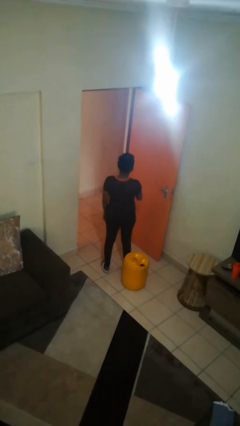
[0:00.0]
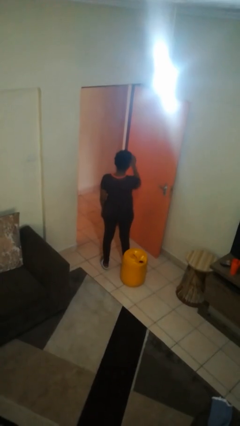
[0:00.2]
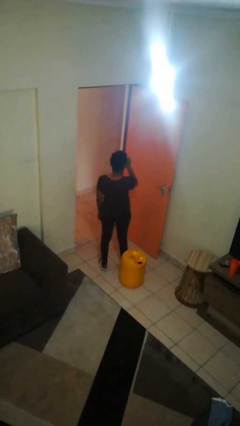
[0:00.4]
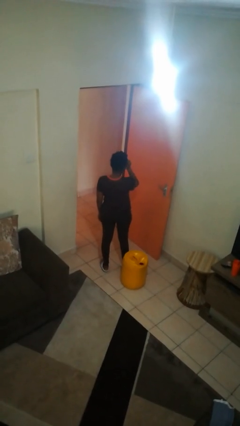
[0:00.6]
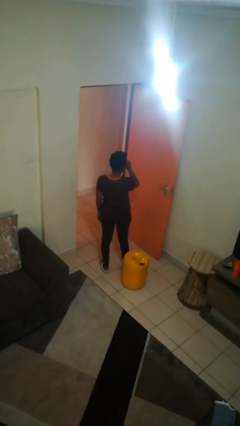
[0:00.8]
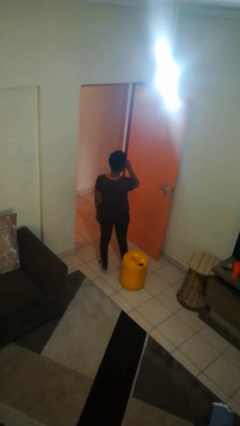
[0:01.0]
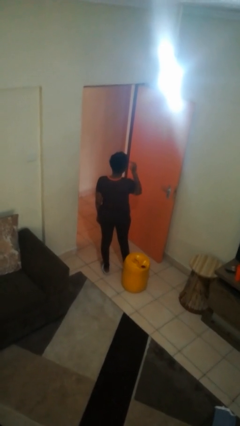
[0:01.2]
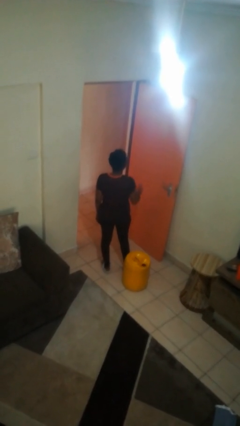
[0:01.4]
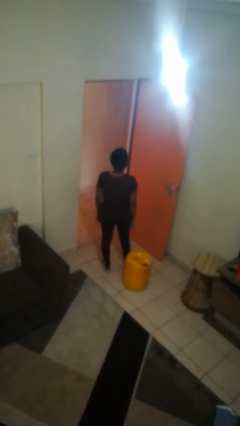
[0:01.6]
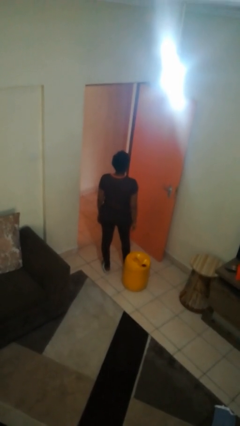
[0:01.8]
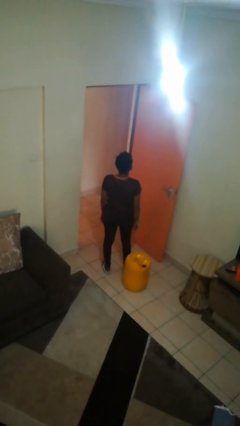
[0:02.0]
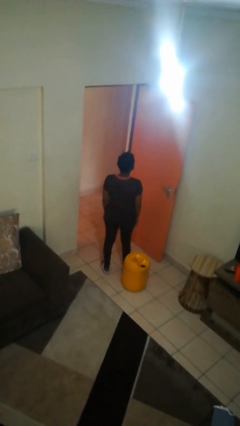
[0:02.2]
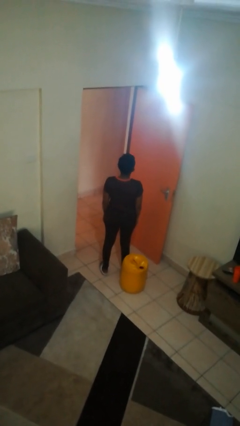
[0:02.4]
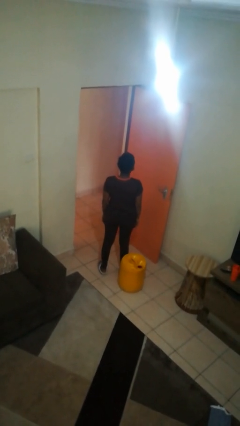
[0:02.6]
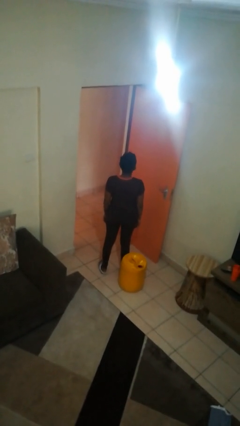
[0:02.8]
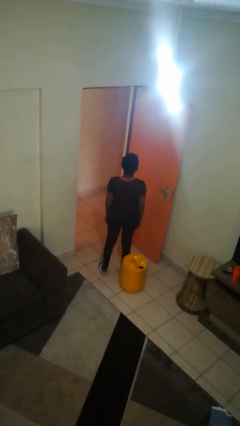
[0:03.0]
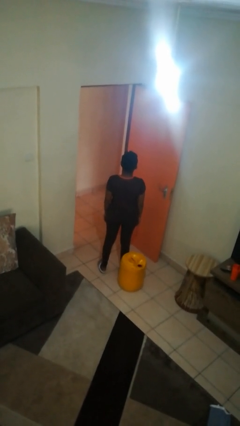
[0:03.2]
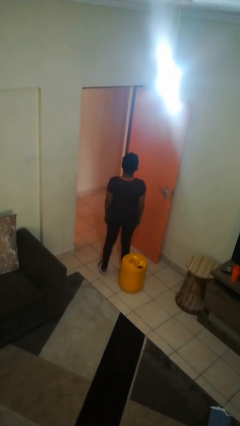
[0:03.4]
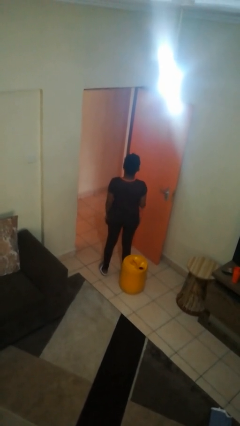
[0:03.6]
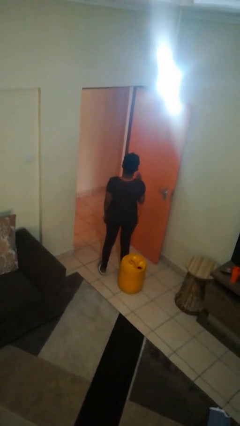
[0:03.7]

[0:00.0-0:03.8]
person puts on glasses

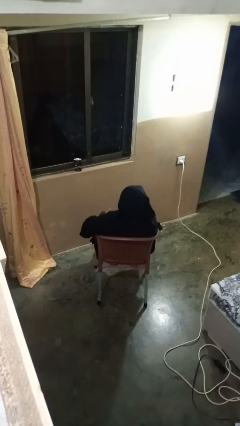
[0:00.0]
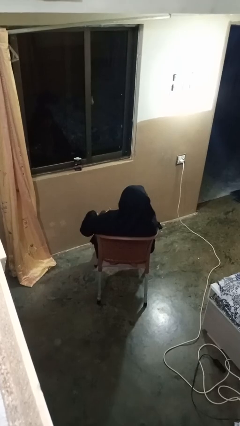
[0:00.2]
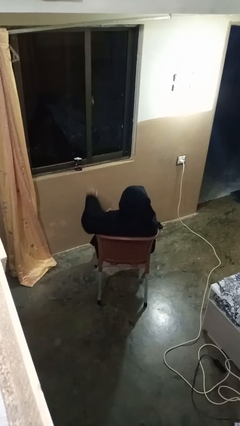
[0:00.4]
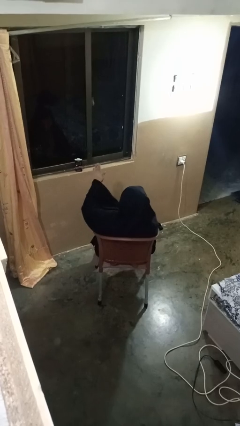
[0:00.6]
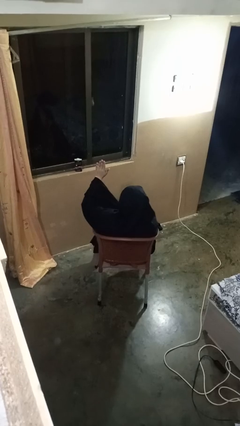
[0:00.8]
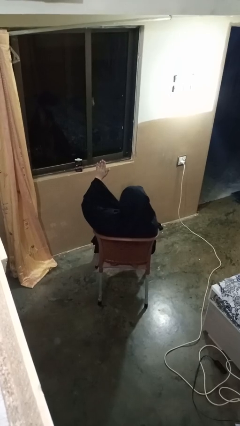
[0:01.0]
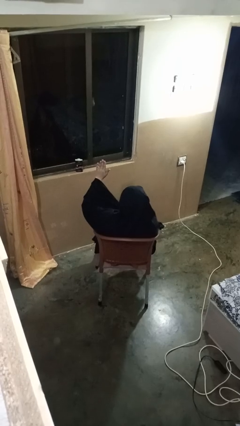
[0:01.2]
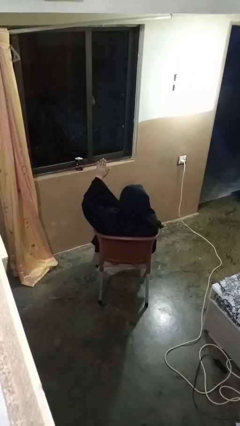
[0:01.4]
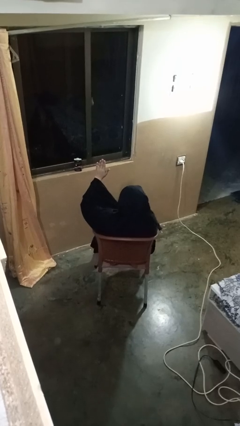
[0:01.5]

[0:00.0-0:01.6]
person gestures raise hand

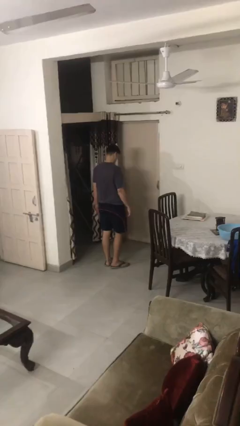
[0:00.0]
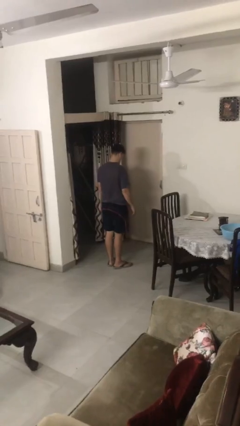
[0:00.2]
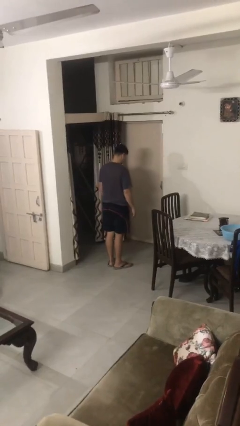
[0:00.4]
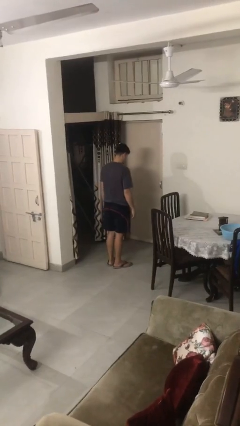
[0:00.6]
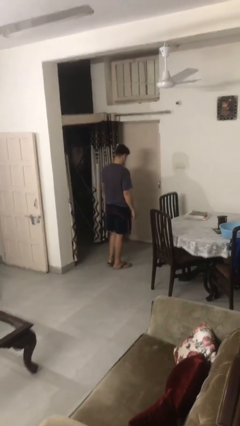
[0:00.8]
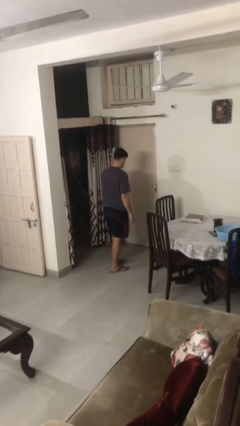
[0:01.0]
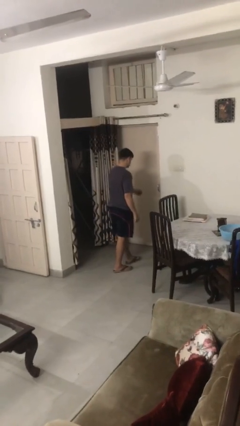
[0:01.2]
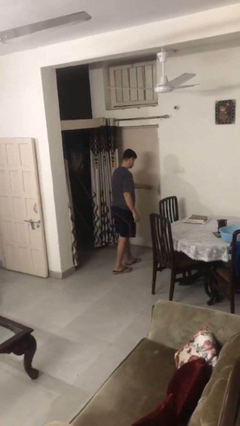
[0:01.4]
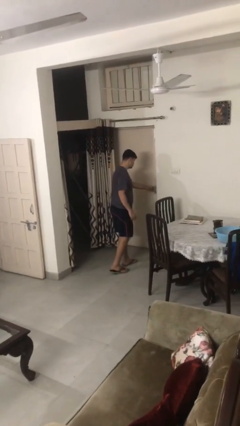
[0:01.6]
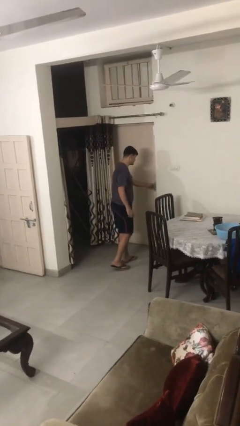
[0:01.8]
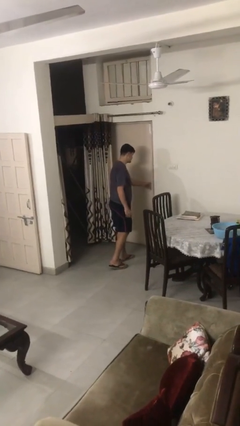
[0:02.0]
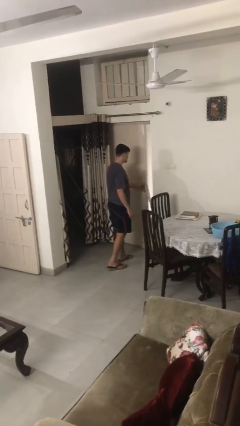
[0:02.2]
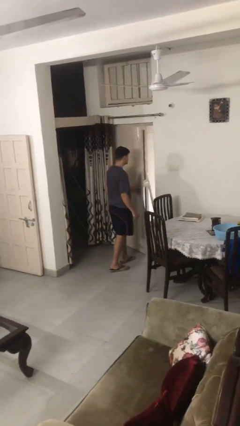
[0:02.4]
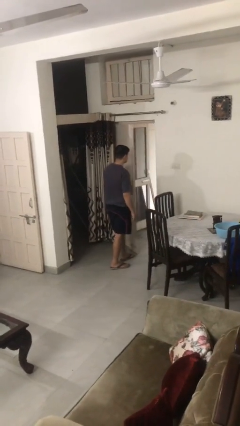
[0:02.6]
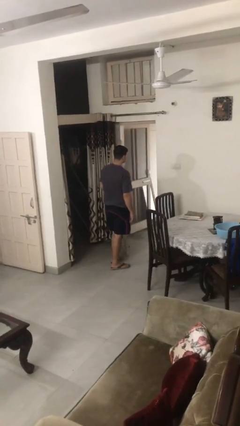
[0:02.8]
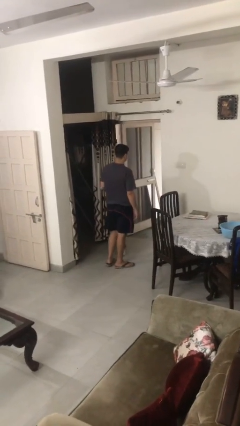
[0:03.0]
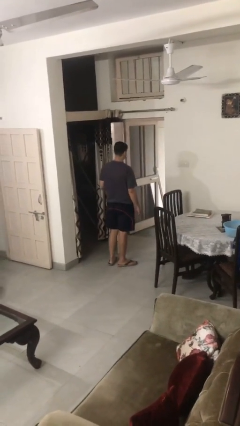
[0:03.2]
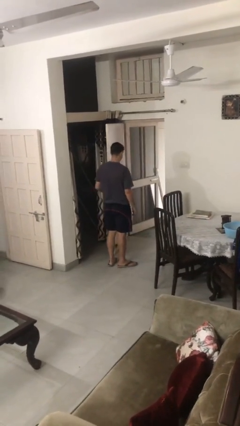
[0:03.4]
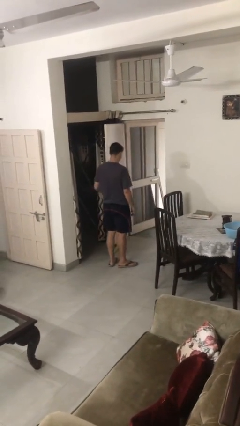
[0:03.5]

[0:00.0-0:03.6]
person opens facility door

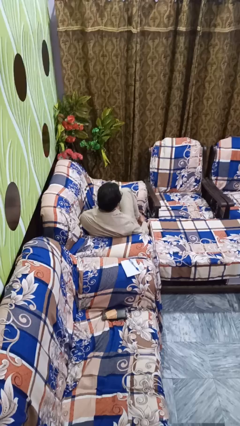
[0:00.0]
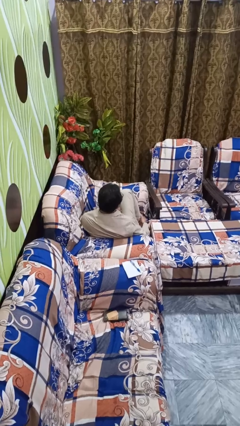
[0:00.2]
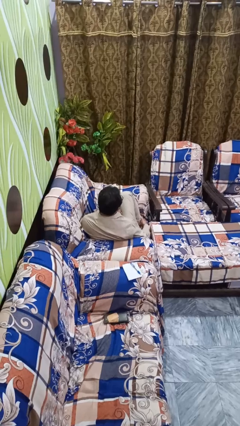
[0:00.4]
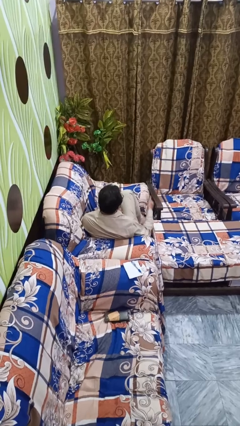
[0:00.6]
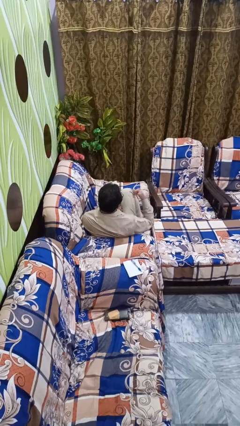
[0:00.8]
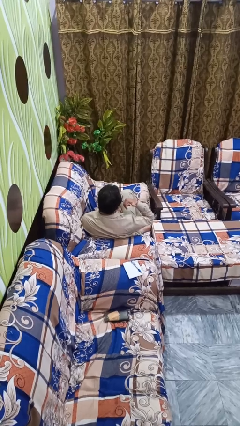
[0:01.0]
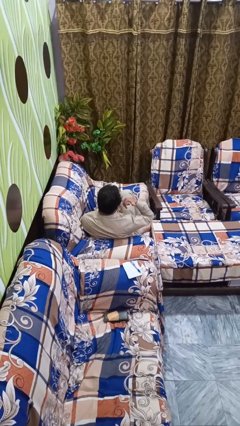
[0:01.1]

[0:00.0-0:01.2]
person gestures call me

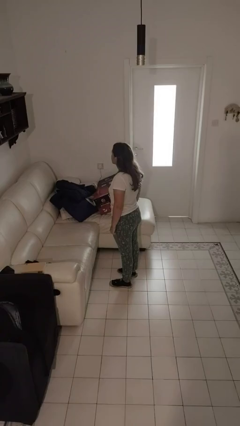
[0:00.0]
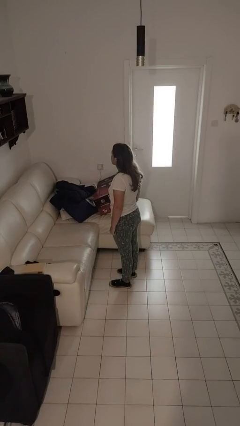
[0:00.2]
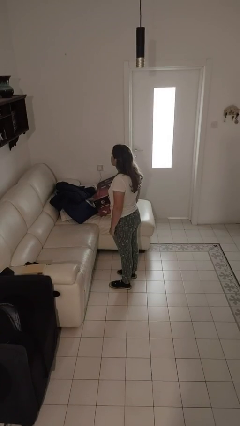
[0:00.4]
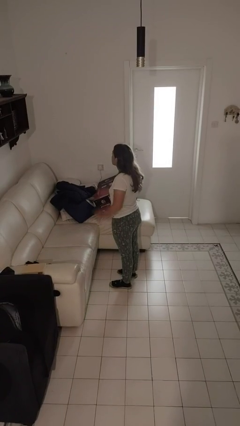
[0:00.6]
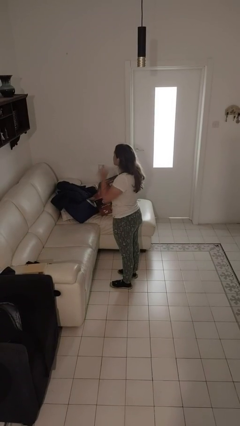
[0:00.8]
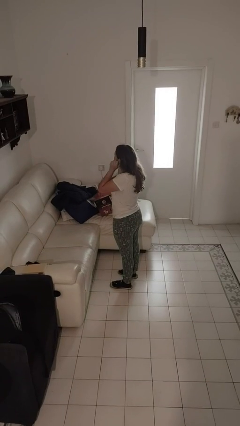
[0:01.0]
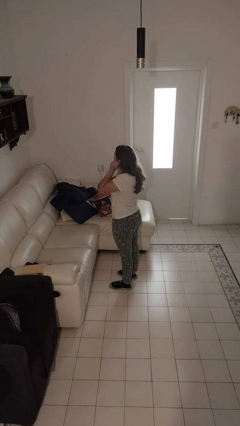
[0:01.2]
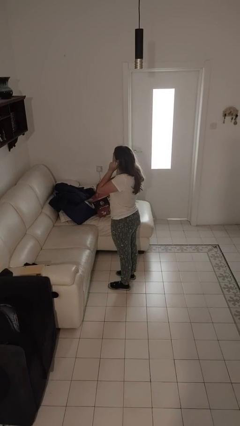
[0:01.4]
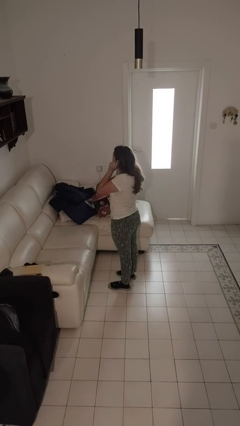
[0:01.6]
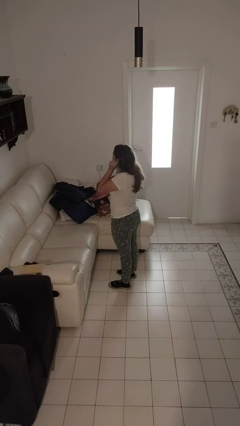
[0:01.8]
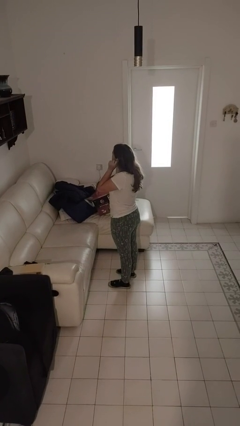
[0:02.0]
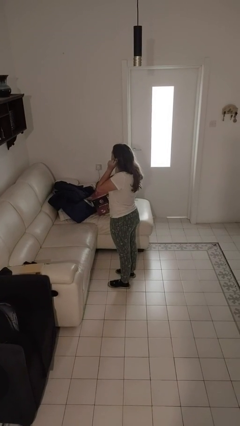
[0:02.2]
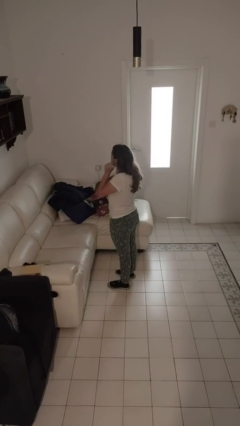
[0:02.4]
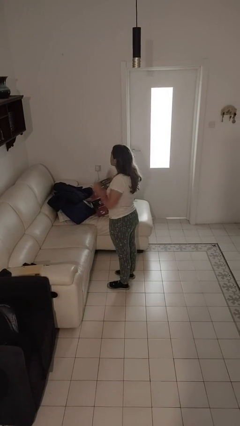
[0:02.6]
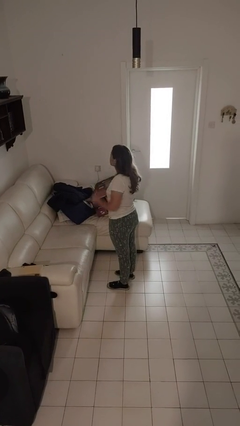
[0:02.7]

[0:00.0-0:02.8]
person touches earlobe

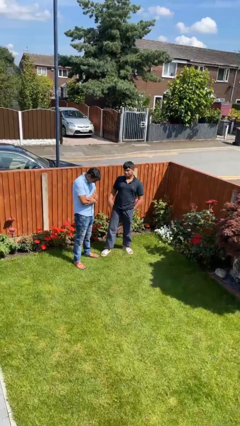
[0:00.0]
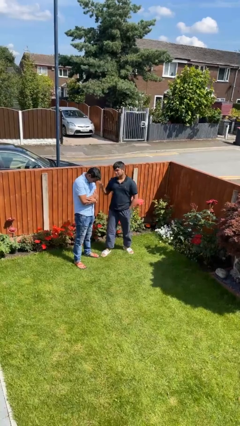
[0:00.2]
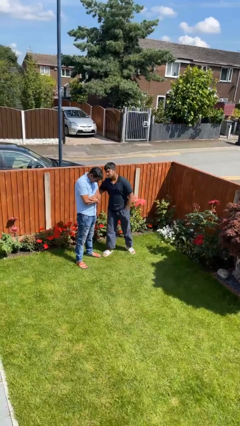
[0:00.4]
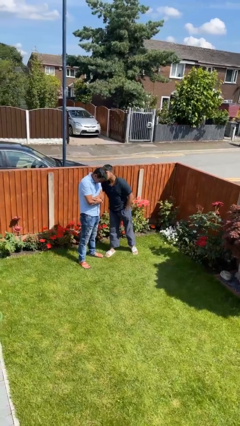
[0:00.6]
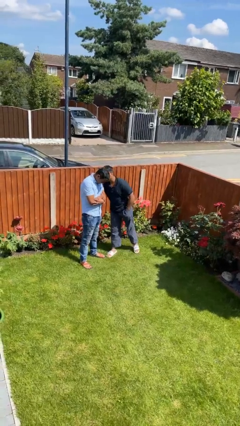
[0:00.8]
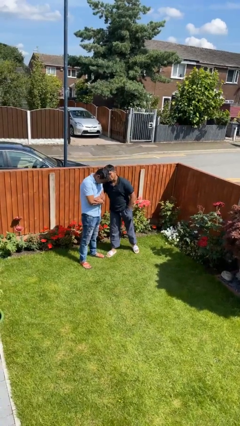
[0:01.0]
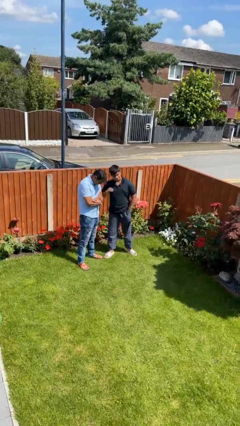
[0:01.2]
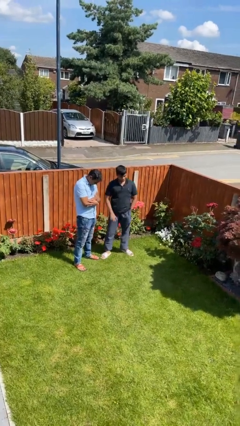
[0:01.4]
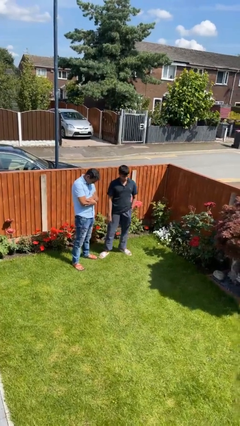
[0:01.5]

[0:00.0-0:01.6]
person kisses cheek of person

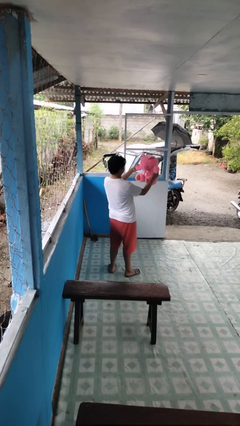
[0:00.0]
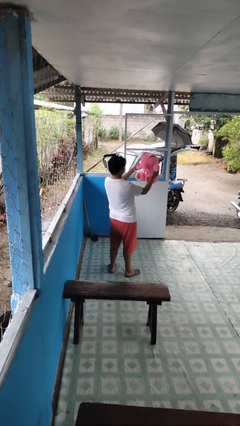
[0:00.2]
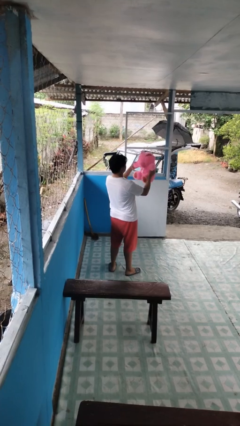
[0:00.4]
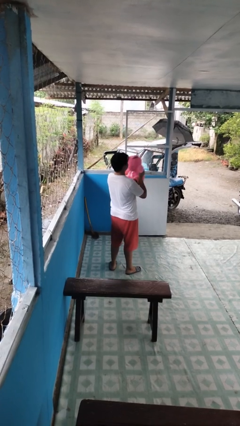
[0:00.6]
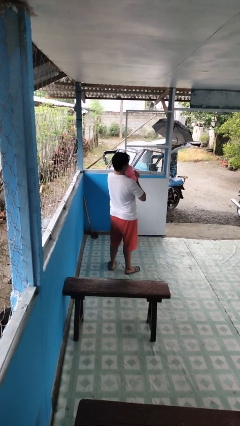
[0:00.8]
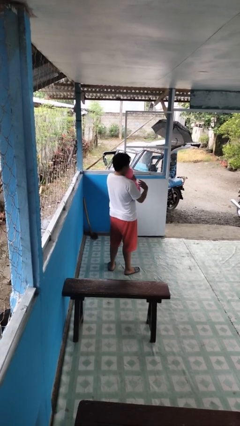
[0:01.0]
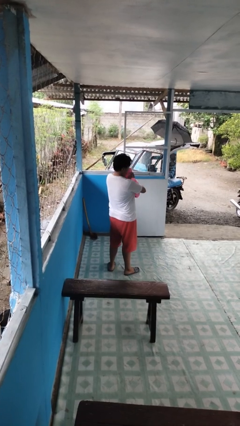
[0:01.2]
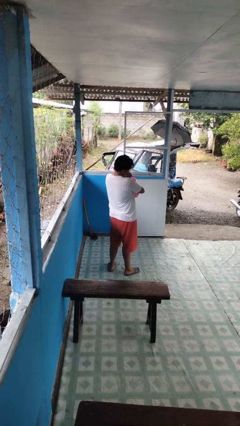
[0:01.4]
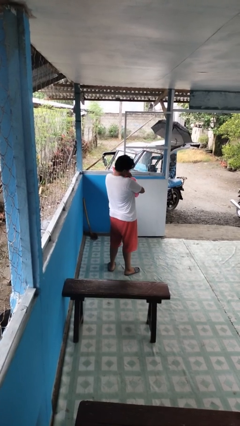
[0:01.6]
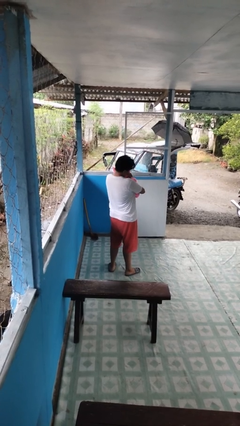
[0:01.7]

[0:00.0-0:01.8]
person hugs stuffed animal

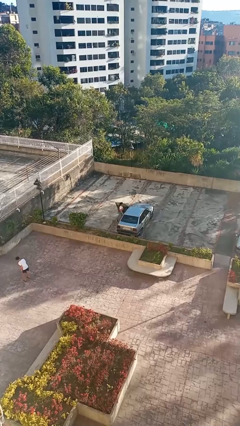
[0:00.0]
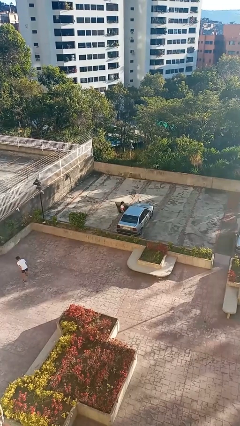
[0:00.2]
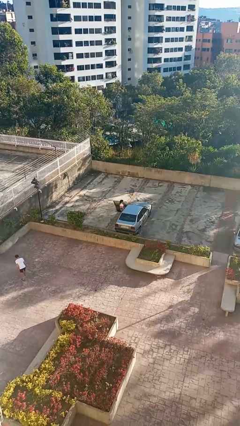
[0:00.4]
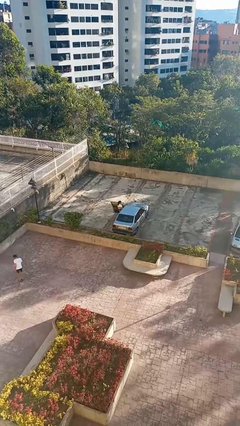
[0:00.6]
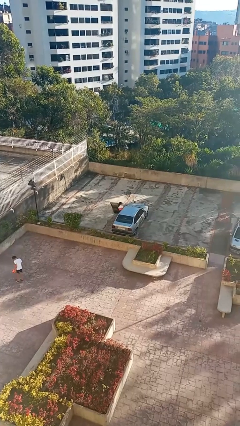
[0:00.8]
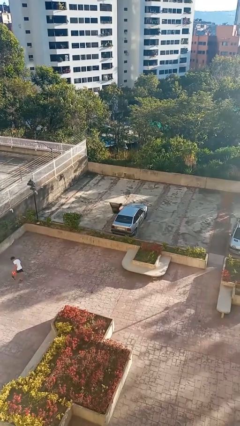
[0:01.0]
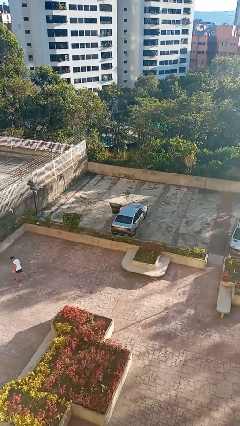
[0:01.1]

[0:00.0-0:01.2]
person enters car
